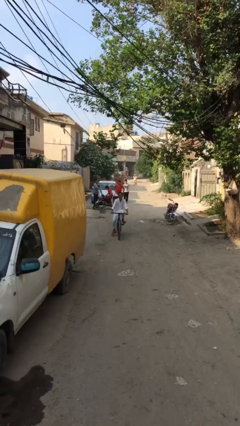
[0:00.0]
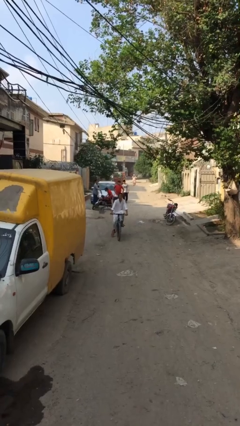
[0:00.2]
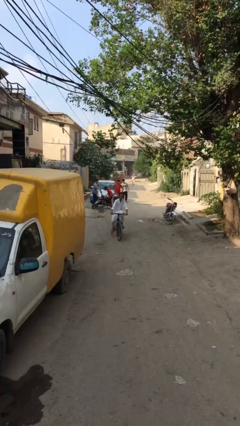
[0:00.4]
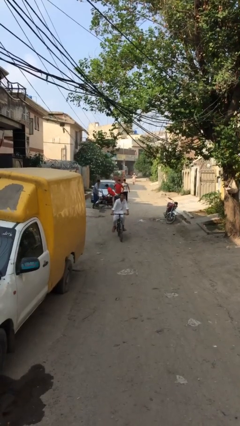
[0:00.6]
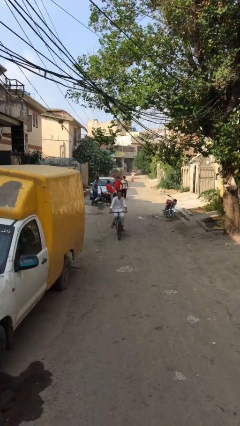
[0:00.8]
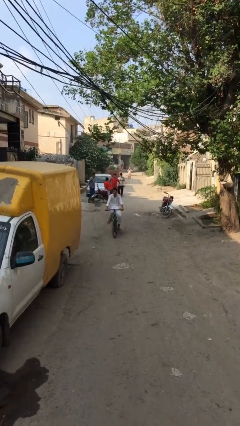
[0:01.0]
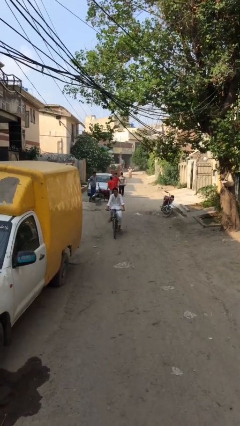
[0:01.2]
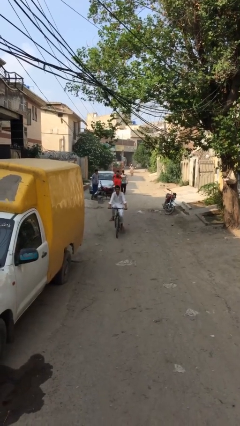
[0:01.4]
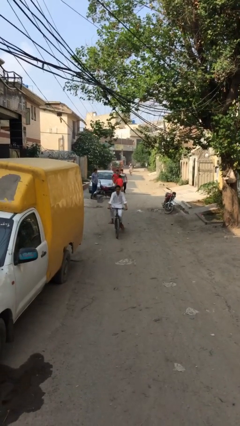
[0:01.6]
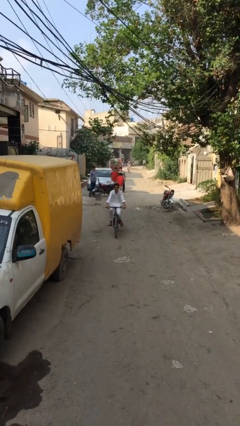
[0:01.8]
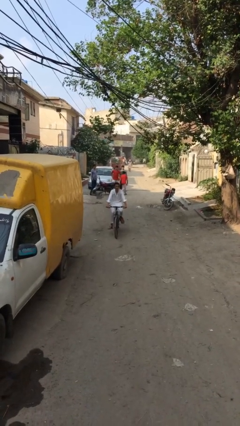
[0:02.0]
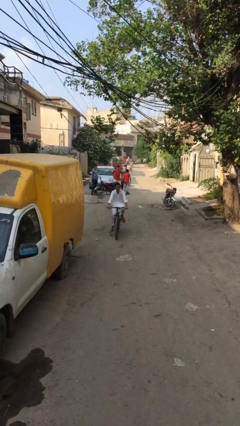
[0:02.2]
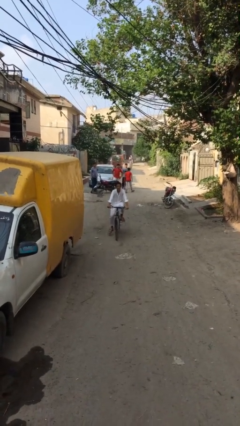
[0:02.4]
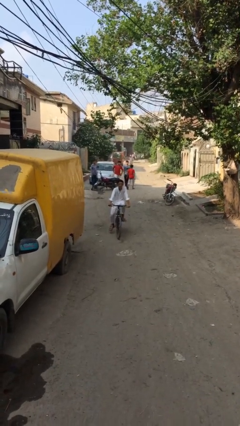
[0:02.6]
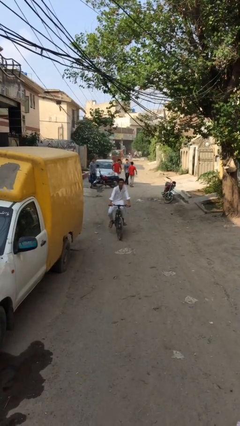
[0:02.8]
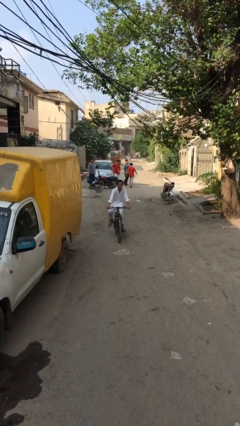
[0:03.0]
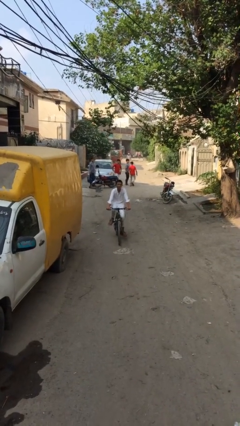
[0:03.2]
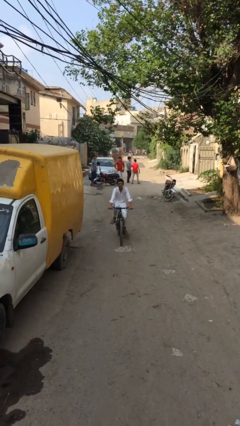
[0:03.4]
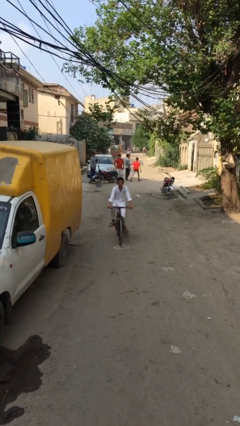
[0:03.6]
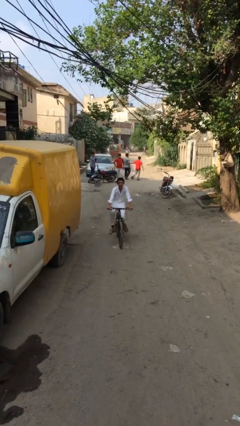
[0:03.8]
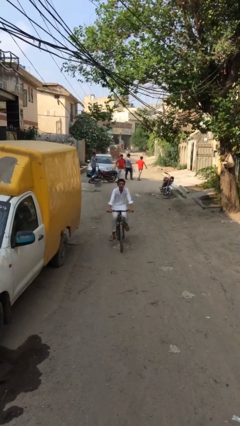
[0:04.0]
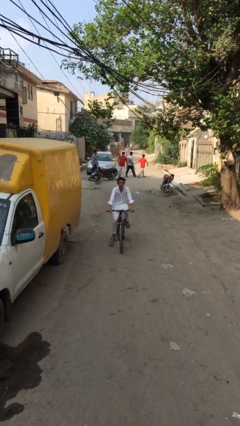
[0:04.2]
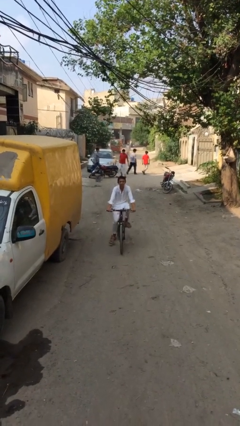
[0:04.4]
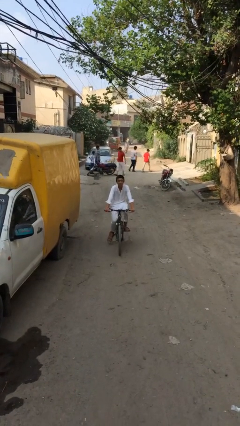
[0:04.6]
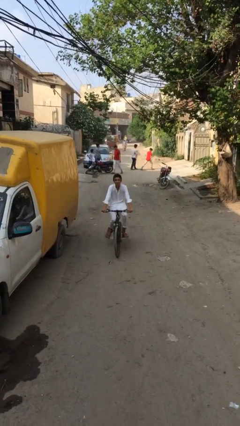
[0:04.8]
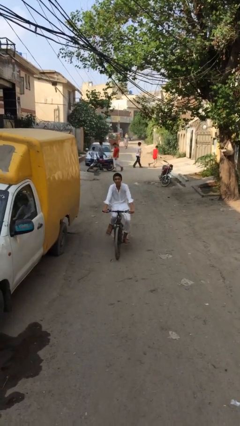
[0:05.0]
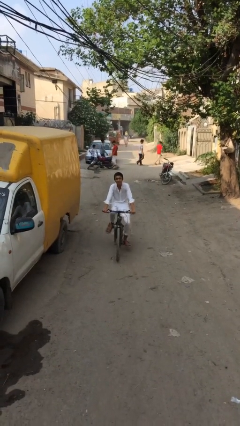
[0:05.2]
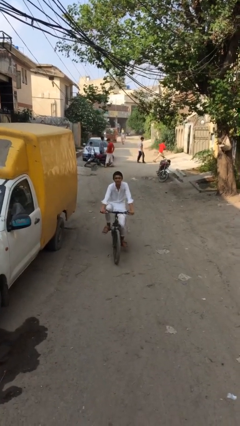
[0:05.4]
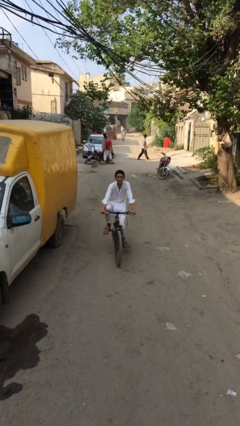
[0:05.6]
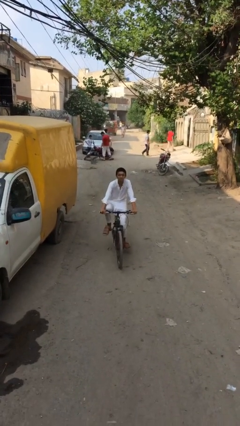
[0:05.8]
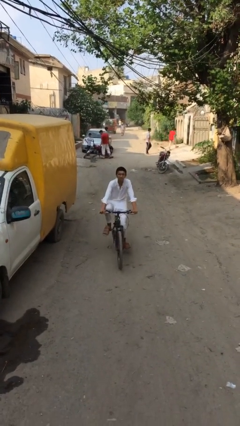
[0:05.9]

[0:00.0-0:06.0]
person rides bicycle

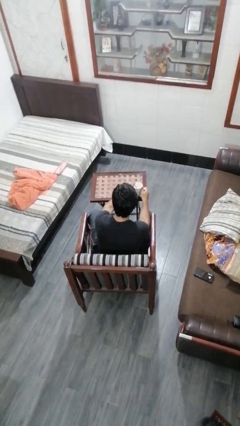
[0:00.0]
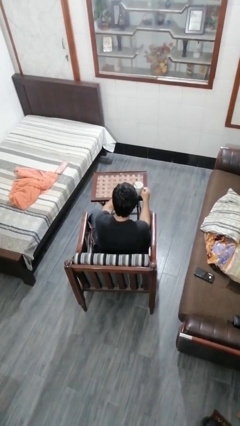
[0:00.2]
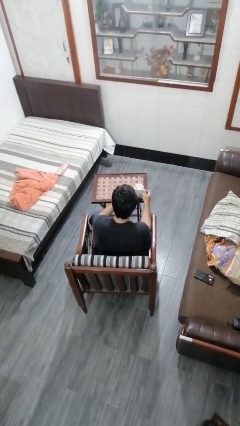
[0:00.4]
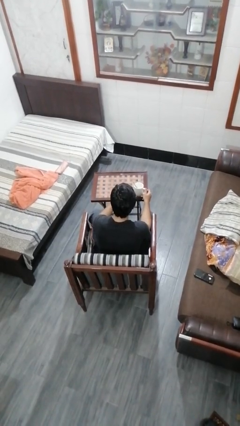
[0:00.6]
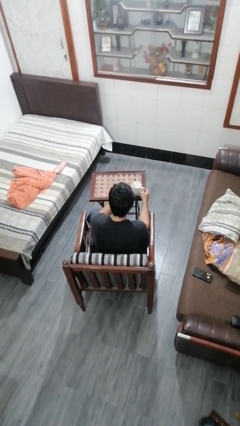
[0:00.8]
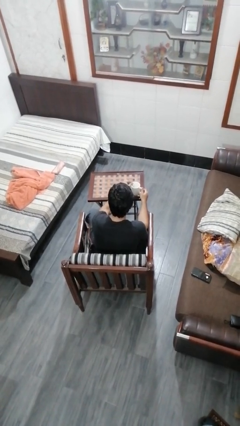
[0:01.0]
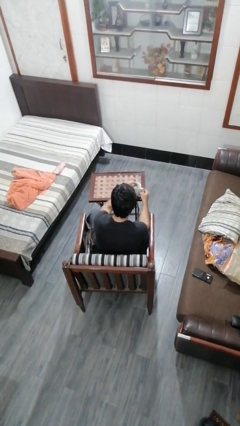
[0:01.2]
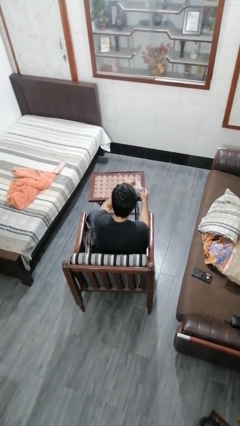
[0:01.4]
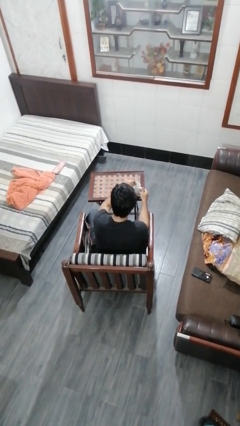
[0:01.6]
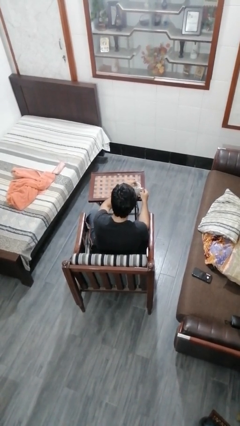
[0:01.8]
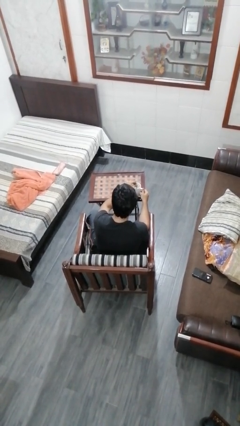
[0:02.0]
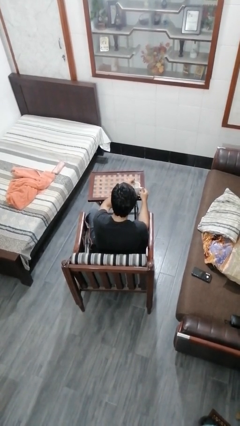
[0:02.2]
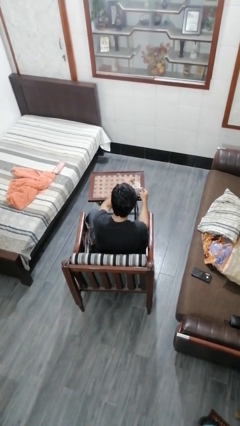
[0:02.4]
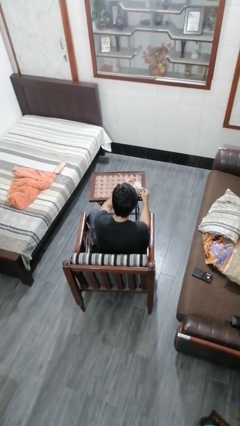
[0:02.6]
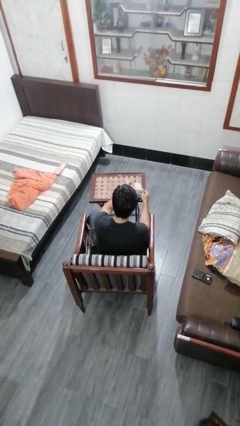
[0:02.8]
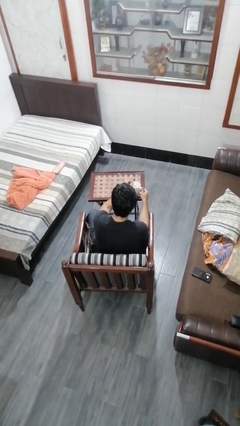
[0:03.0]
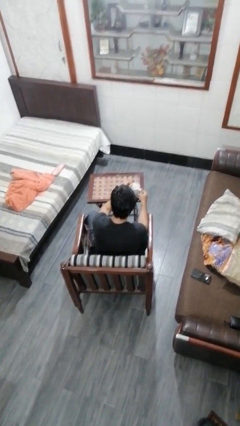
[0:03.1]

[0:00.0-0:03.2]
person stirs mug

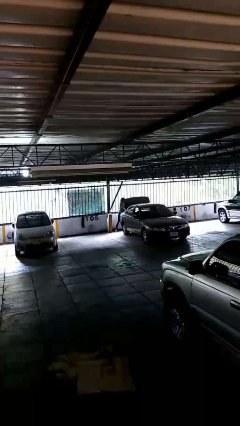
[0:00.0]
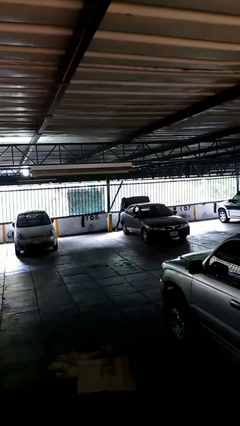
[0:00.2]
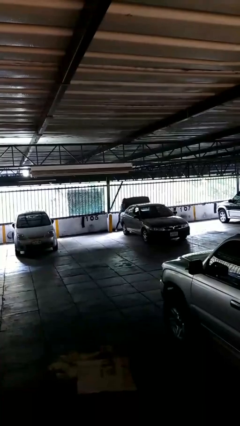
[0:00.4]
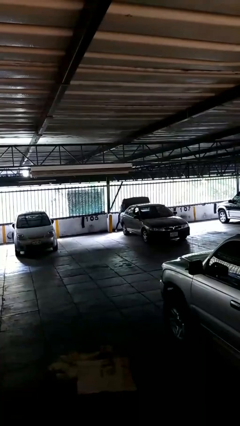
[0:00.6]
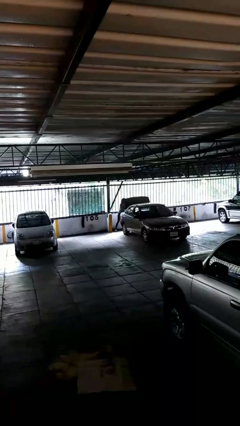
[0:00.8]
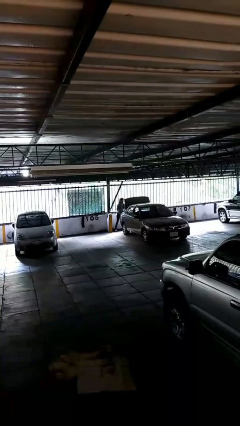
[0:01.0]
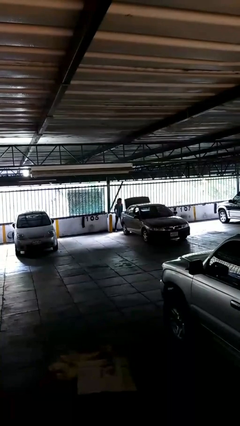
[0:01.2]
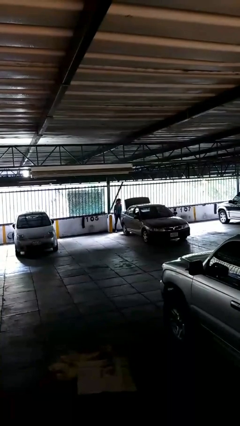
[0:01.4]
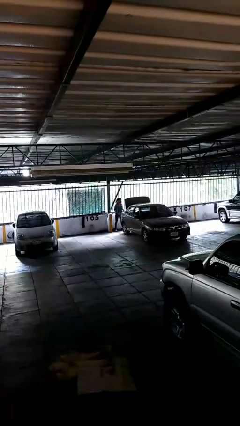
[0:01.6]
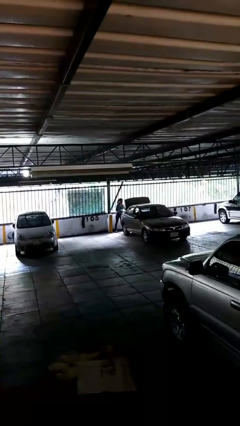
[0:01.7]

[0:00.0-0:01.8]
person loads car

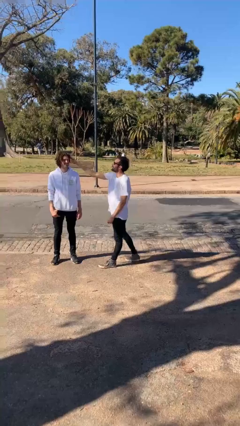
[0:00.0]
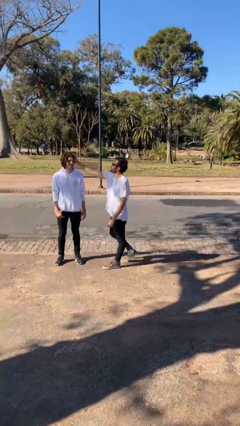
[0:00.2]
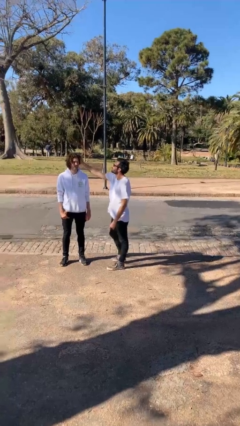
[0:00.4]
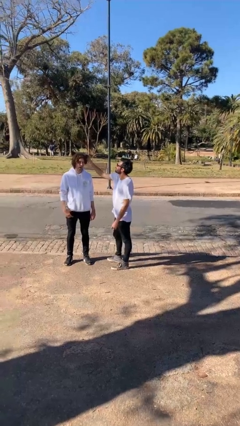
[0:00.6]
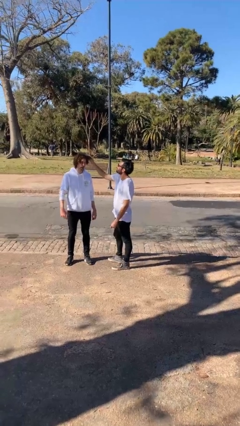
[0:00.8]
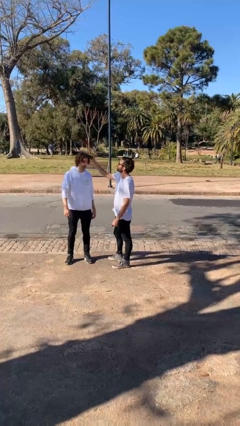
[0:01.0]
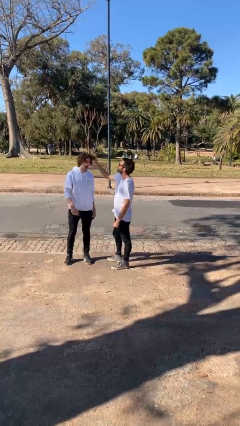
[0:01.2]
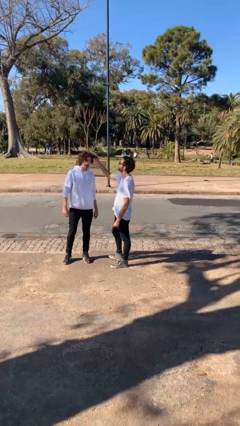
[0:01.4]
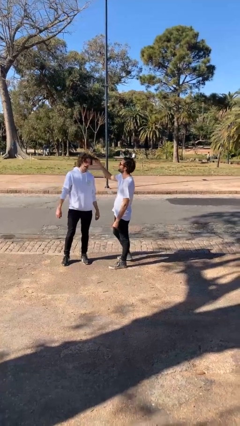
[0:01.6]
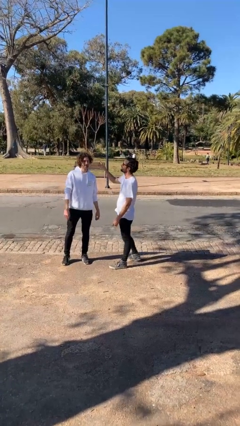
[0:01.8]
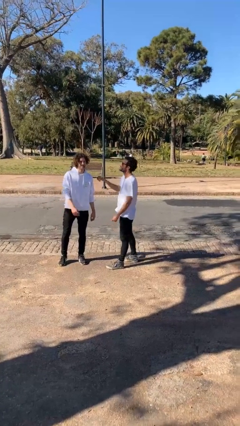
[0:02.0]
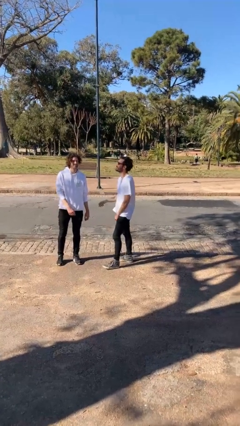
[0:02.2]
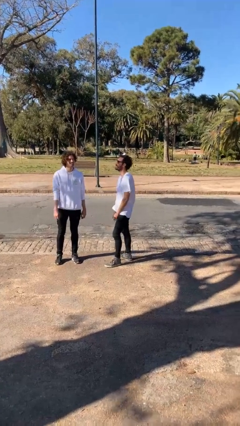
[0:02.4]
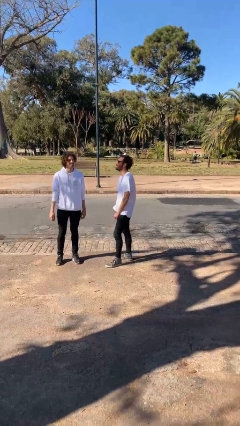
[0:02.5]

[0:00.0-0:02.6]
person grabs person by hair

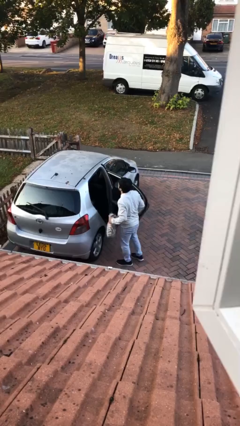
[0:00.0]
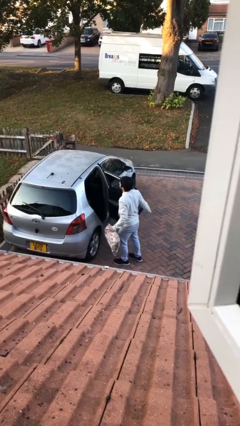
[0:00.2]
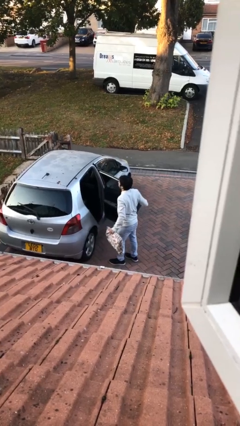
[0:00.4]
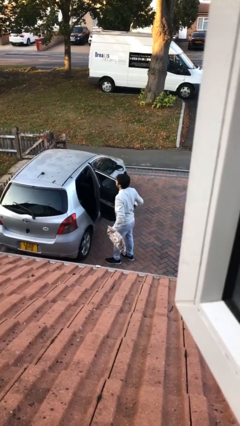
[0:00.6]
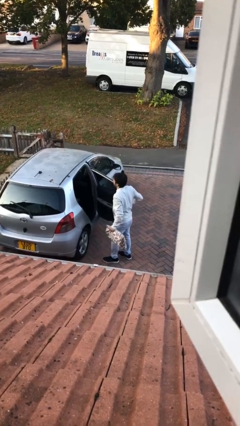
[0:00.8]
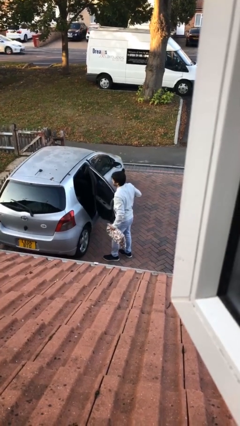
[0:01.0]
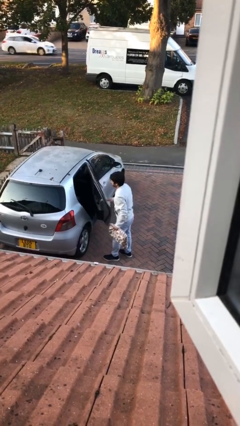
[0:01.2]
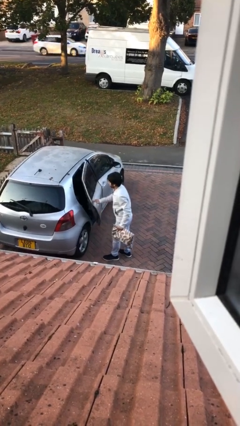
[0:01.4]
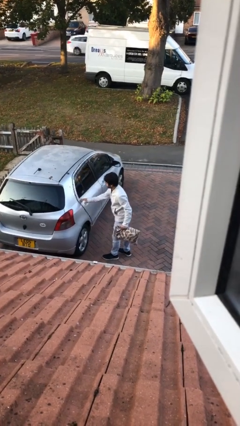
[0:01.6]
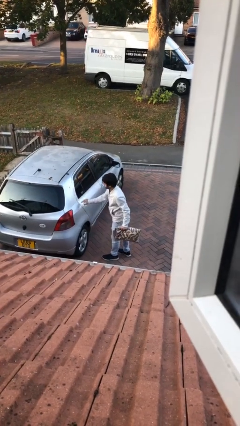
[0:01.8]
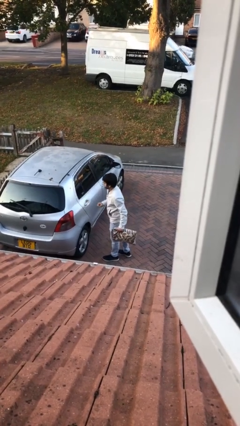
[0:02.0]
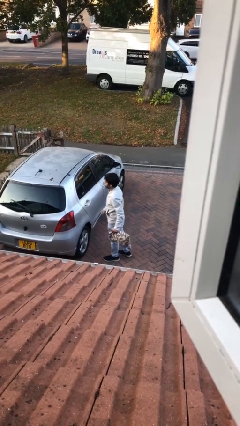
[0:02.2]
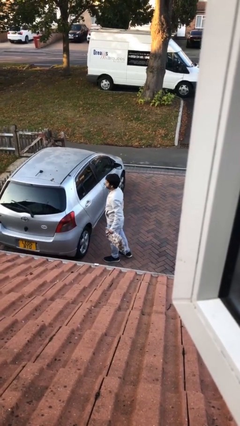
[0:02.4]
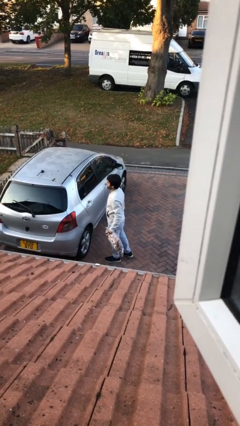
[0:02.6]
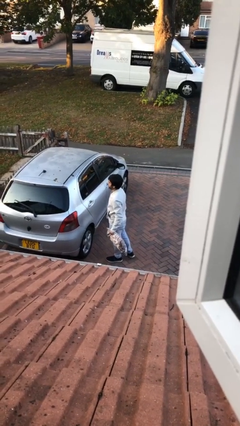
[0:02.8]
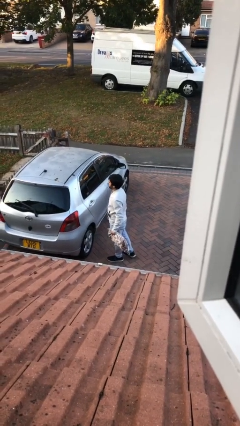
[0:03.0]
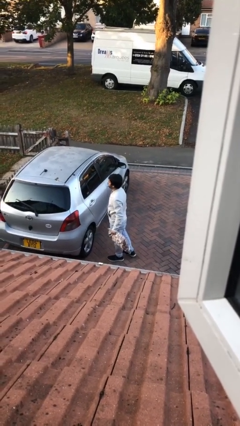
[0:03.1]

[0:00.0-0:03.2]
person closes car door

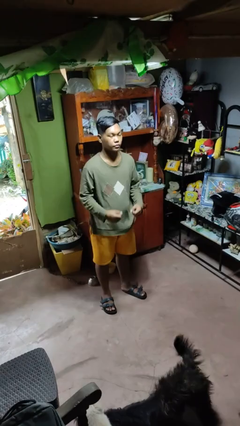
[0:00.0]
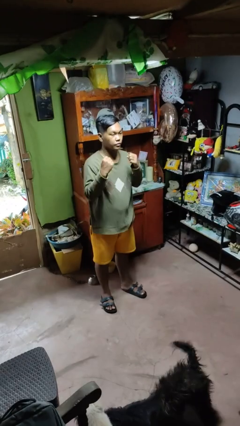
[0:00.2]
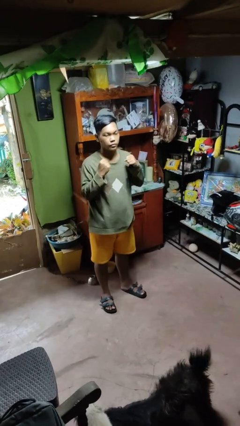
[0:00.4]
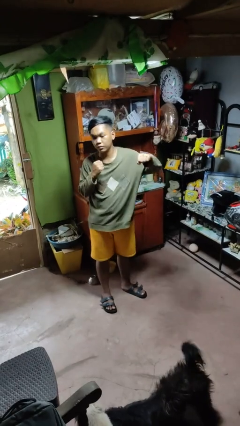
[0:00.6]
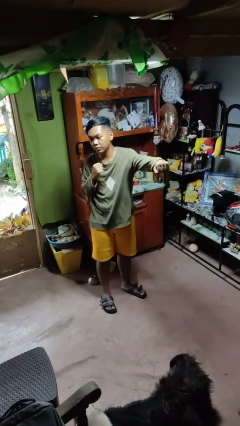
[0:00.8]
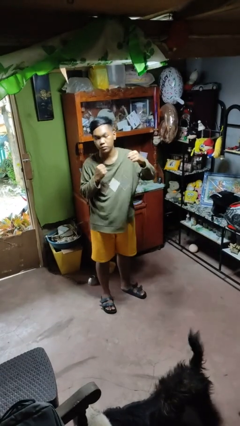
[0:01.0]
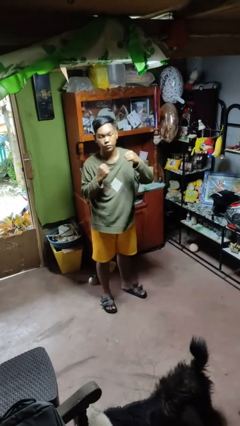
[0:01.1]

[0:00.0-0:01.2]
person punches
